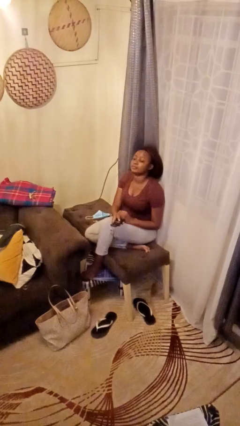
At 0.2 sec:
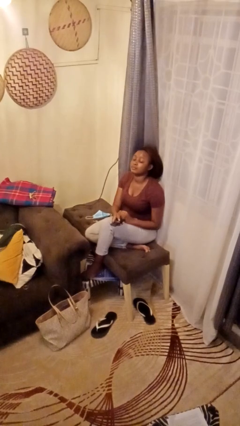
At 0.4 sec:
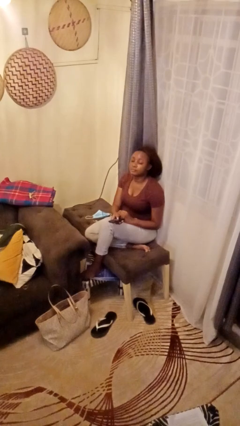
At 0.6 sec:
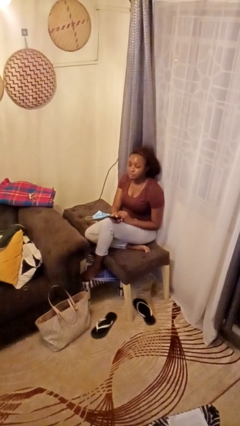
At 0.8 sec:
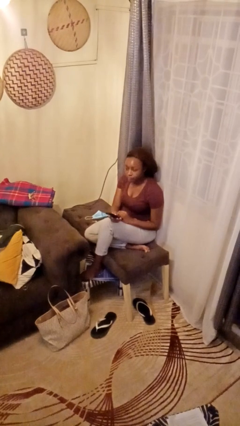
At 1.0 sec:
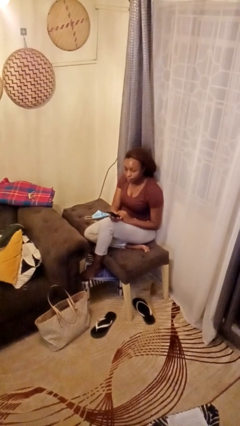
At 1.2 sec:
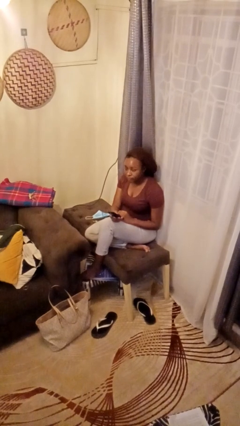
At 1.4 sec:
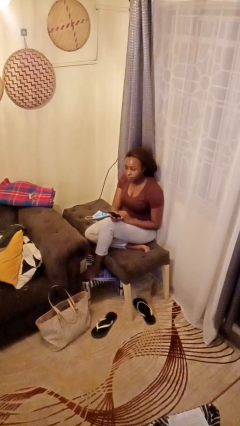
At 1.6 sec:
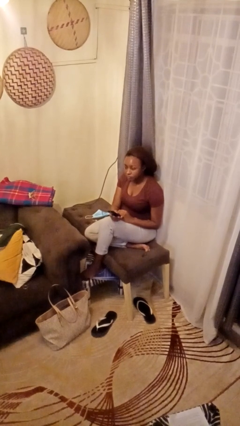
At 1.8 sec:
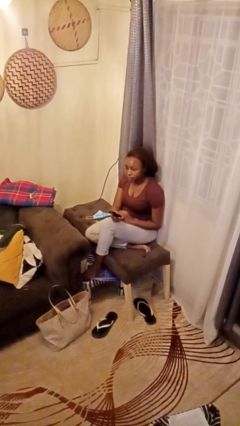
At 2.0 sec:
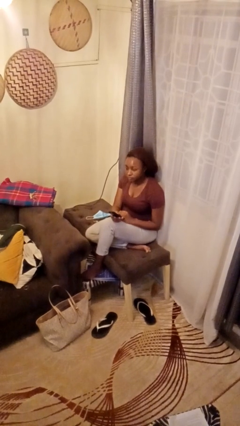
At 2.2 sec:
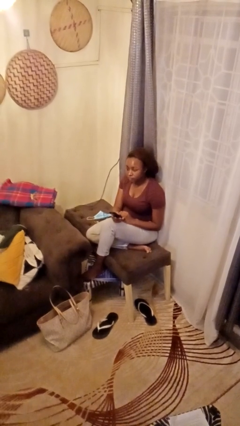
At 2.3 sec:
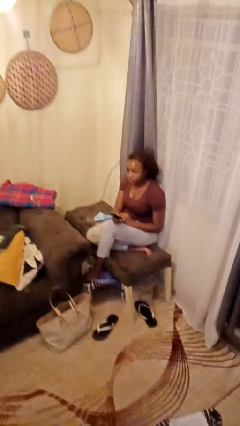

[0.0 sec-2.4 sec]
person uses television remote

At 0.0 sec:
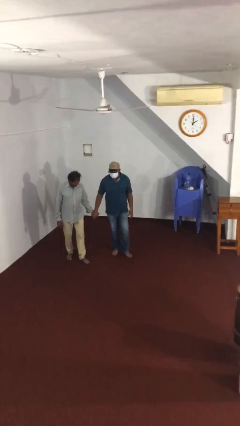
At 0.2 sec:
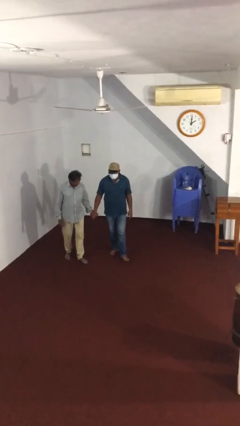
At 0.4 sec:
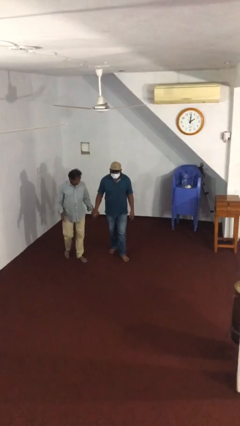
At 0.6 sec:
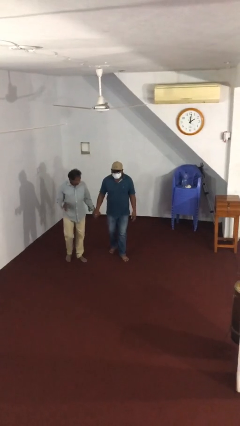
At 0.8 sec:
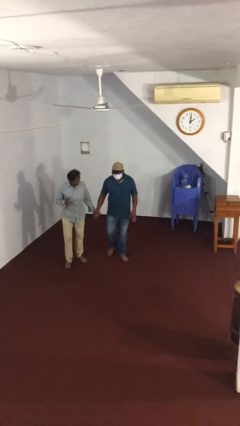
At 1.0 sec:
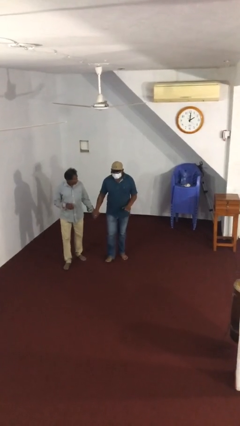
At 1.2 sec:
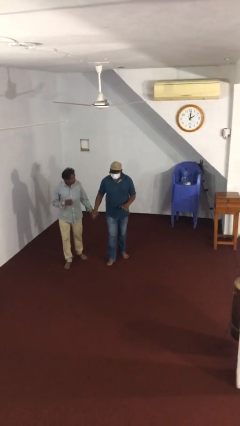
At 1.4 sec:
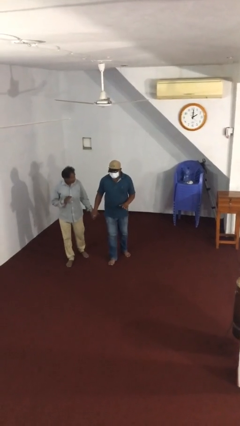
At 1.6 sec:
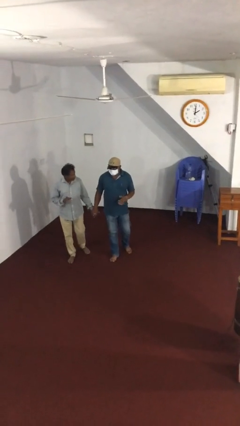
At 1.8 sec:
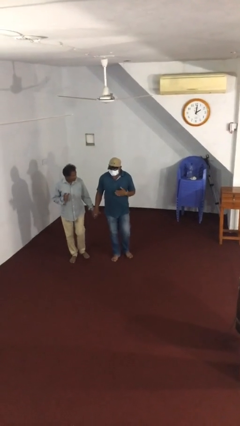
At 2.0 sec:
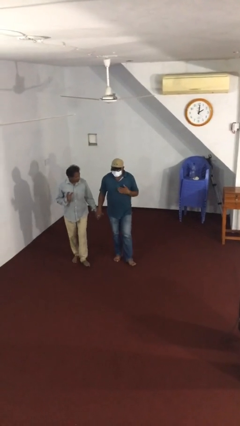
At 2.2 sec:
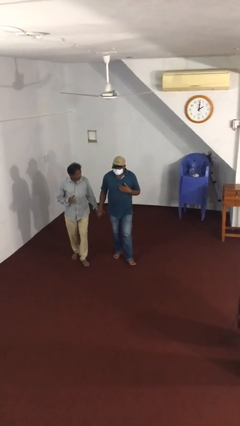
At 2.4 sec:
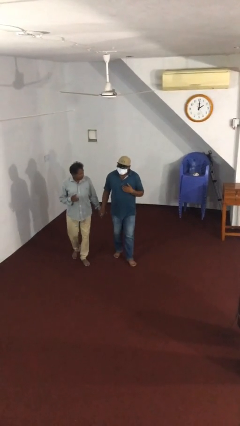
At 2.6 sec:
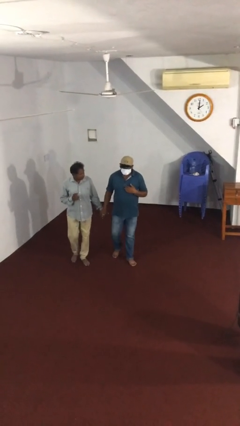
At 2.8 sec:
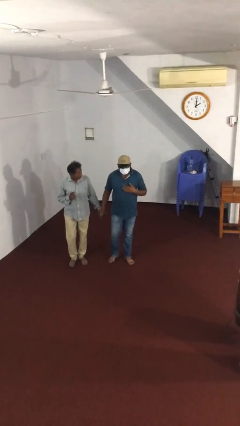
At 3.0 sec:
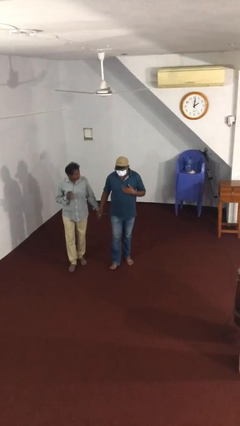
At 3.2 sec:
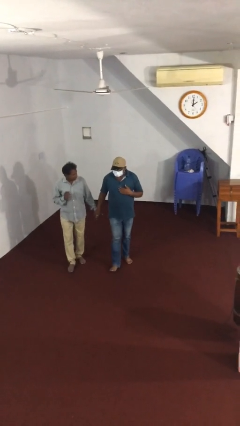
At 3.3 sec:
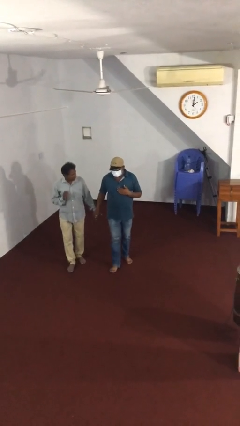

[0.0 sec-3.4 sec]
person holds hand

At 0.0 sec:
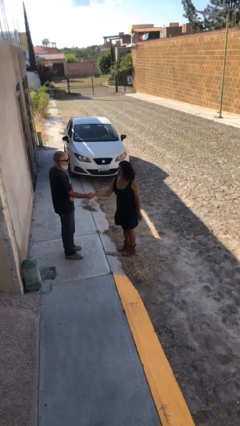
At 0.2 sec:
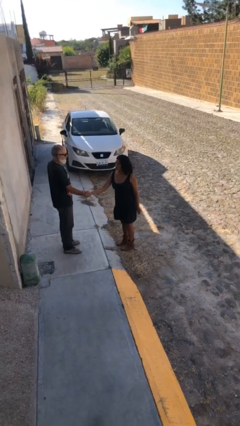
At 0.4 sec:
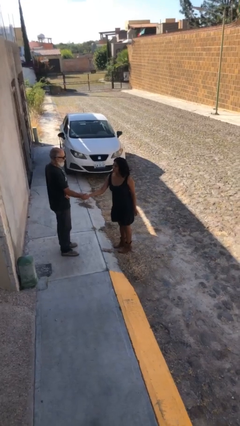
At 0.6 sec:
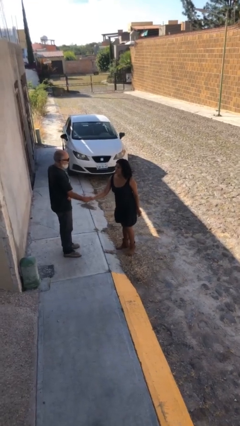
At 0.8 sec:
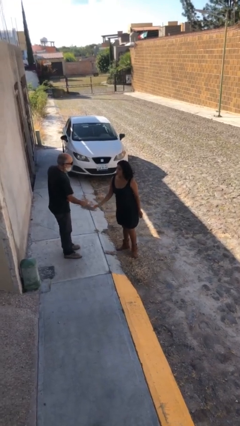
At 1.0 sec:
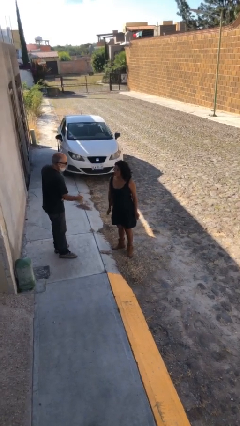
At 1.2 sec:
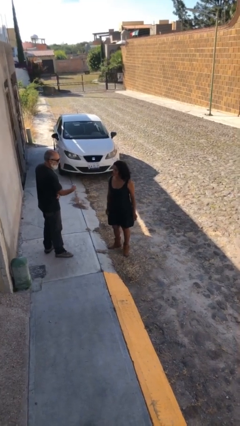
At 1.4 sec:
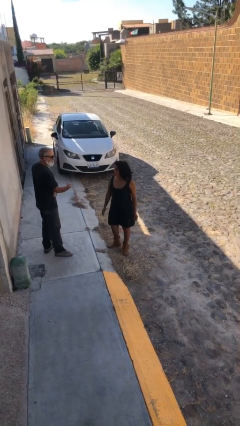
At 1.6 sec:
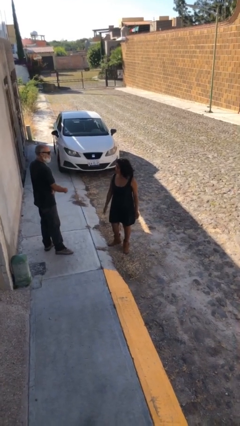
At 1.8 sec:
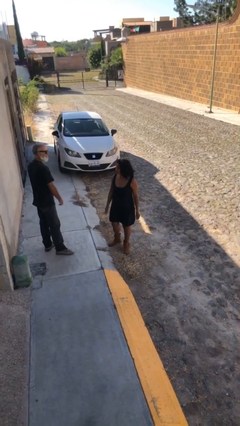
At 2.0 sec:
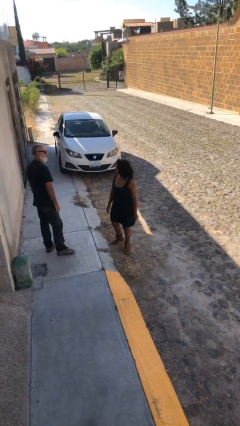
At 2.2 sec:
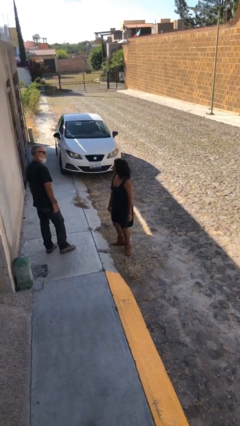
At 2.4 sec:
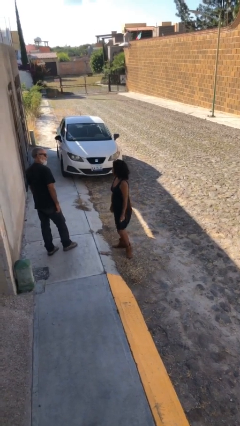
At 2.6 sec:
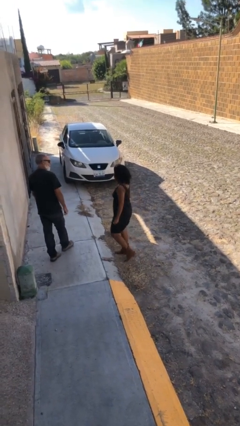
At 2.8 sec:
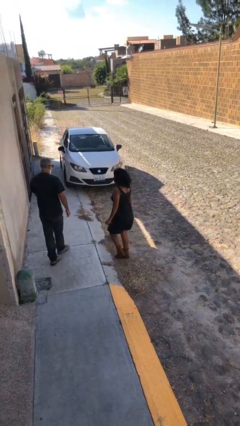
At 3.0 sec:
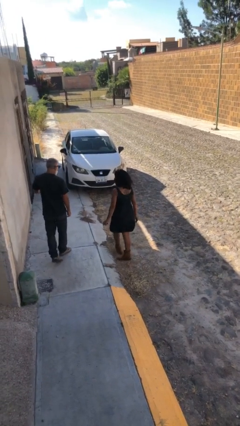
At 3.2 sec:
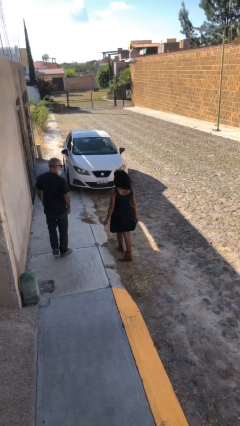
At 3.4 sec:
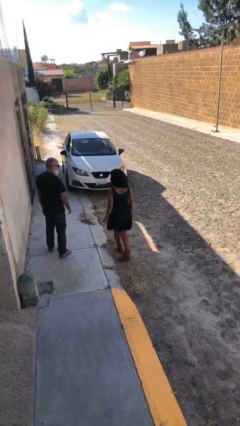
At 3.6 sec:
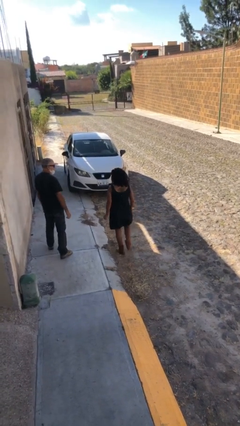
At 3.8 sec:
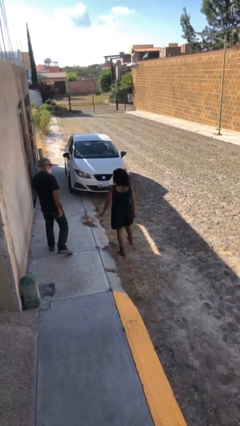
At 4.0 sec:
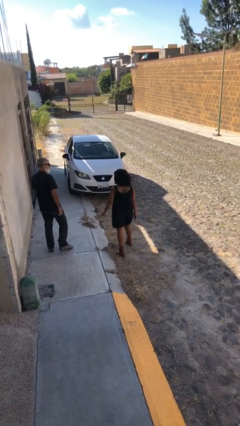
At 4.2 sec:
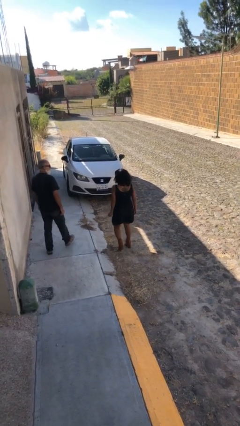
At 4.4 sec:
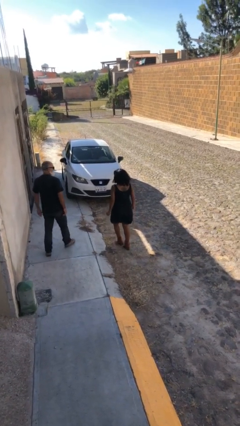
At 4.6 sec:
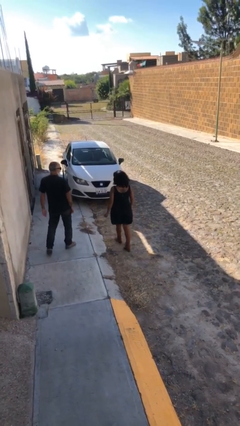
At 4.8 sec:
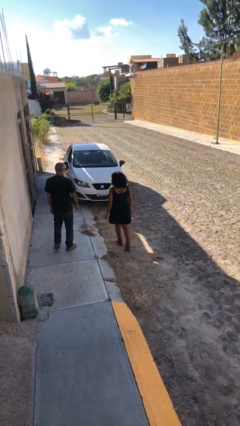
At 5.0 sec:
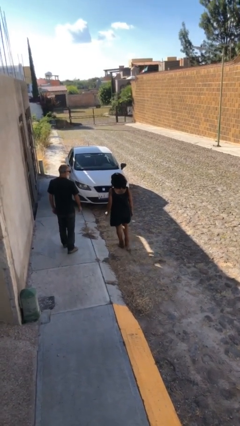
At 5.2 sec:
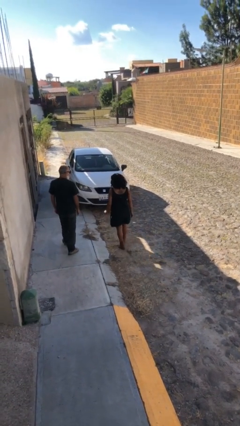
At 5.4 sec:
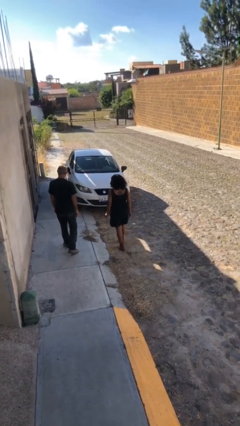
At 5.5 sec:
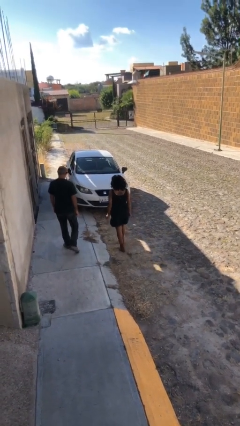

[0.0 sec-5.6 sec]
person talks to person

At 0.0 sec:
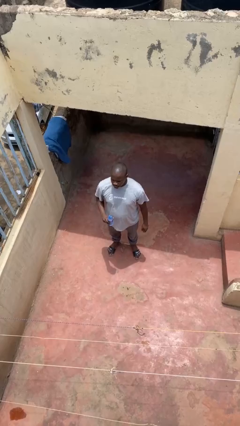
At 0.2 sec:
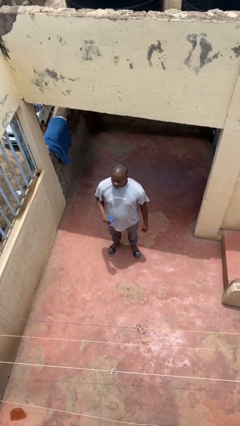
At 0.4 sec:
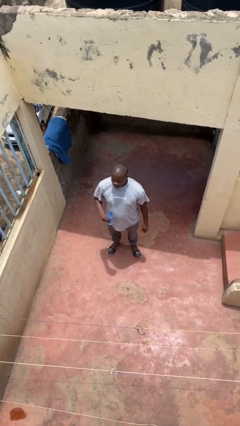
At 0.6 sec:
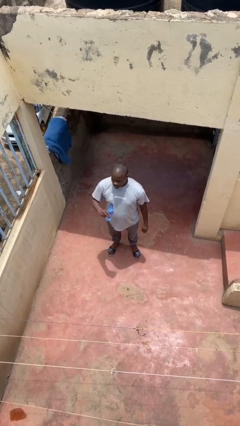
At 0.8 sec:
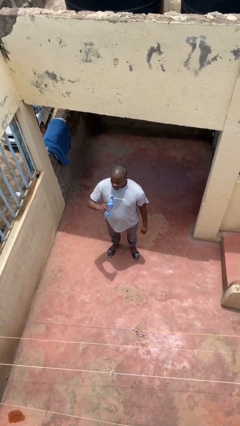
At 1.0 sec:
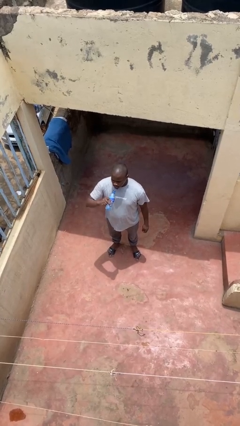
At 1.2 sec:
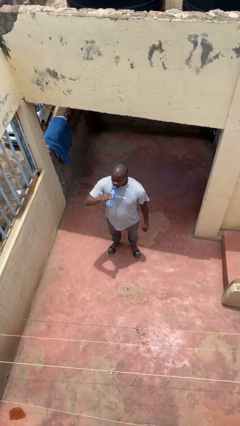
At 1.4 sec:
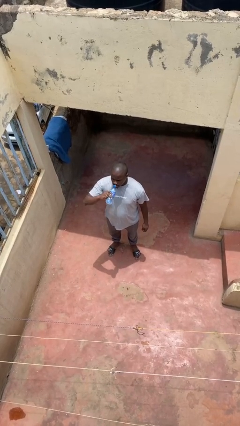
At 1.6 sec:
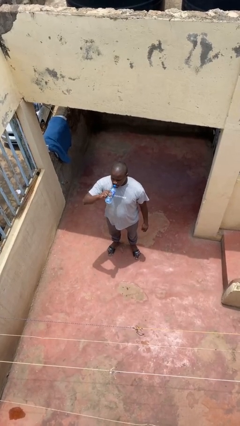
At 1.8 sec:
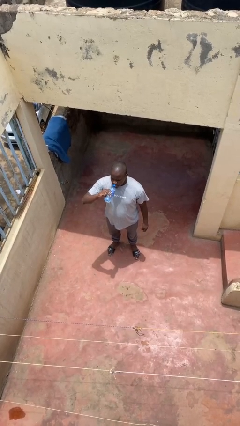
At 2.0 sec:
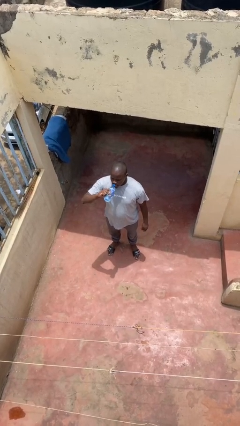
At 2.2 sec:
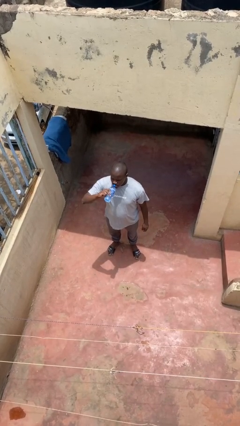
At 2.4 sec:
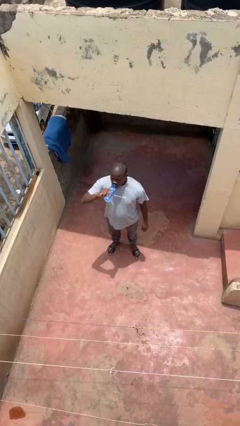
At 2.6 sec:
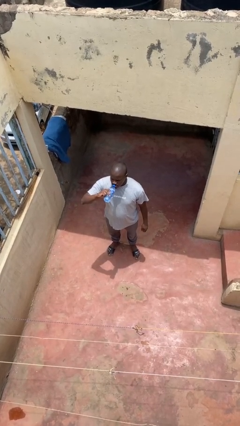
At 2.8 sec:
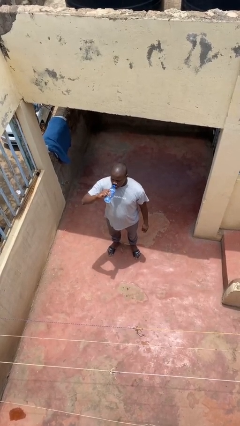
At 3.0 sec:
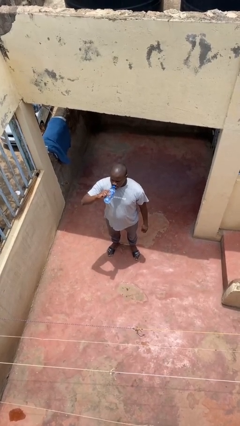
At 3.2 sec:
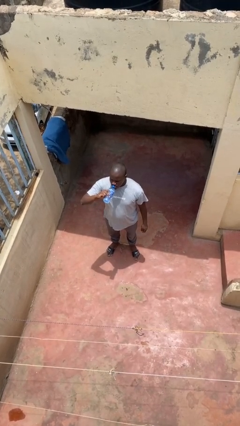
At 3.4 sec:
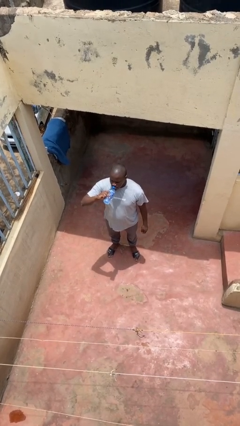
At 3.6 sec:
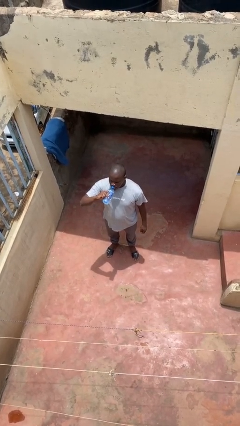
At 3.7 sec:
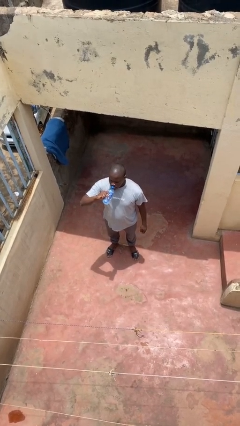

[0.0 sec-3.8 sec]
person drinks from bottle

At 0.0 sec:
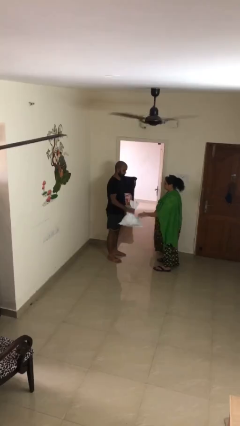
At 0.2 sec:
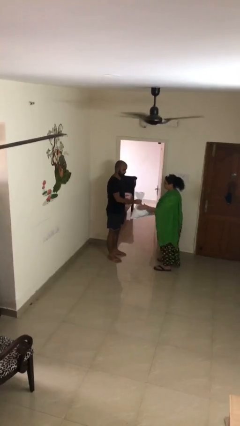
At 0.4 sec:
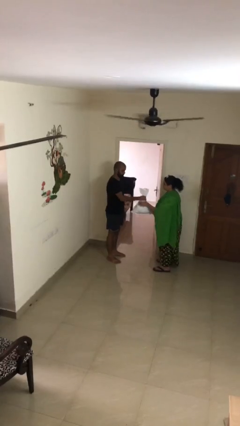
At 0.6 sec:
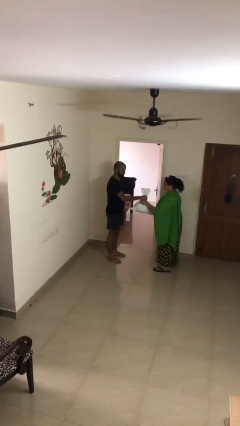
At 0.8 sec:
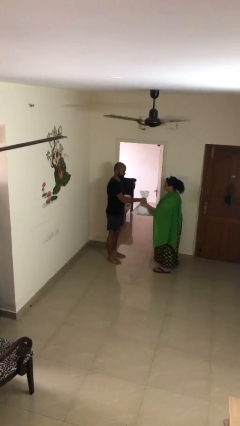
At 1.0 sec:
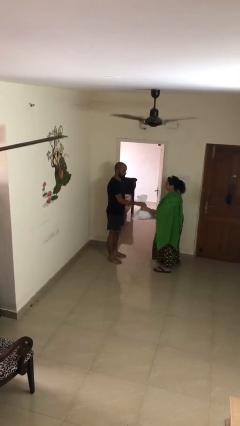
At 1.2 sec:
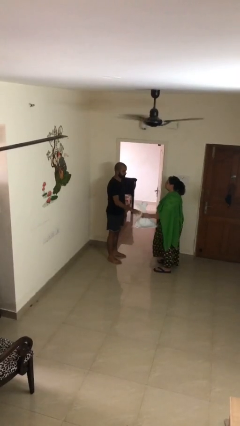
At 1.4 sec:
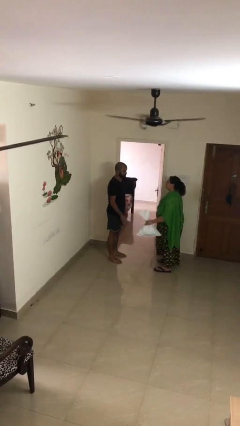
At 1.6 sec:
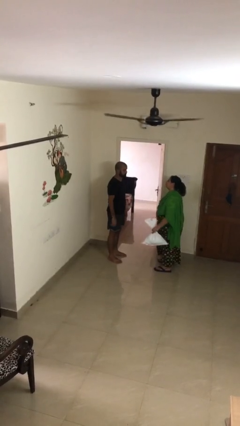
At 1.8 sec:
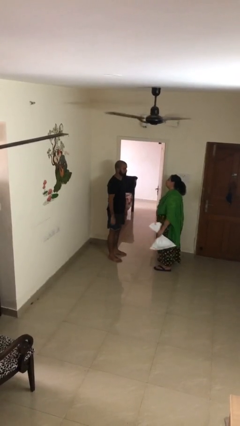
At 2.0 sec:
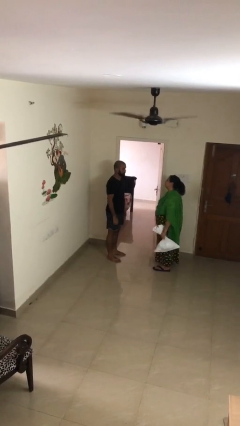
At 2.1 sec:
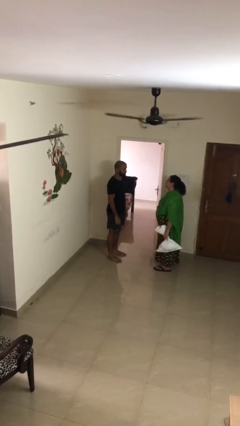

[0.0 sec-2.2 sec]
person transfers object to person
